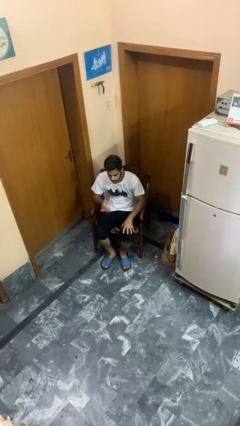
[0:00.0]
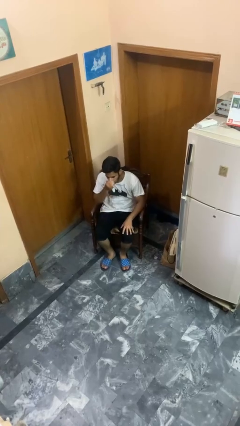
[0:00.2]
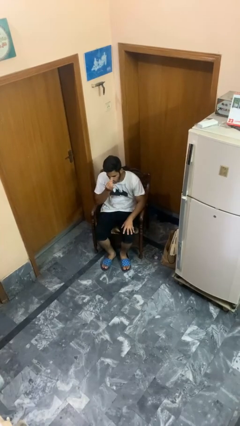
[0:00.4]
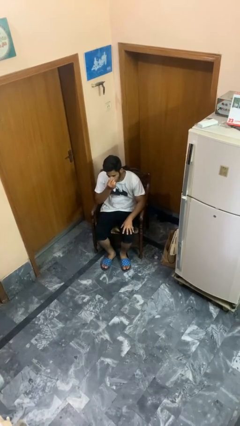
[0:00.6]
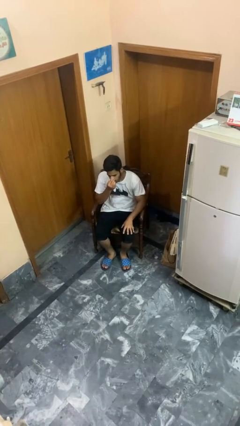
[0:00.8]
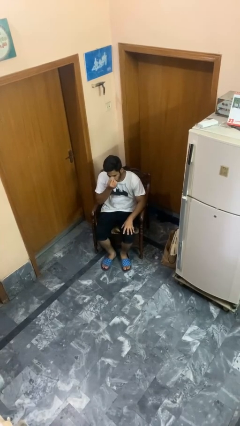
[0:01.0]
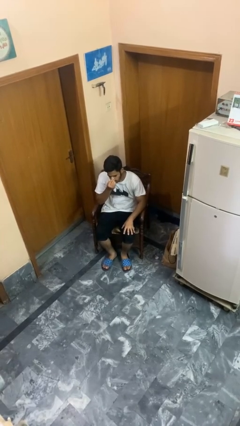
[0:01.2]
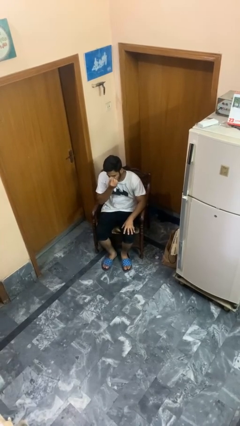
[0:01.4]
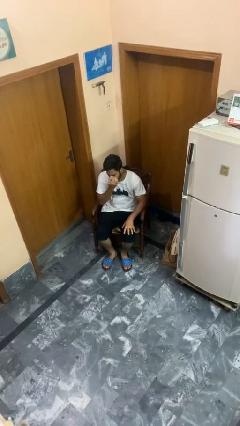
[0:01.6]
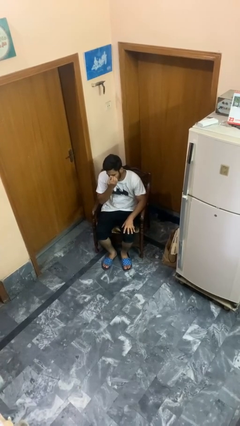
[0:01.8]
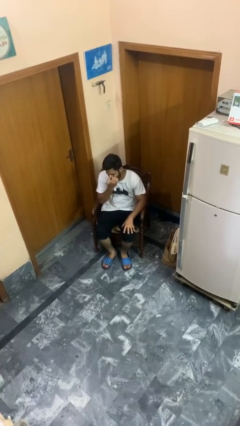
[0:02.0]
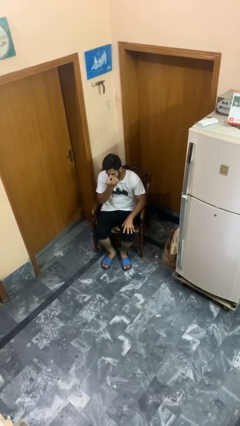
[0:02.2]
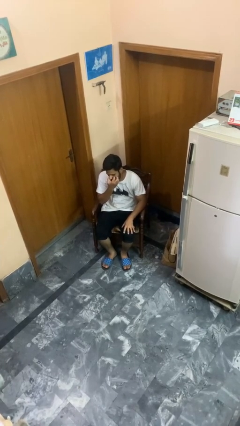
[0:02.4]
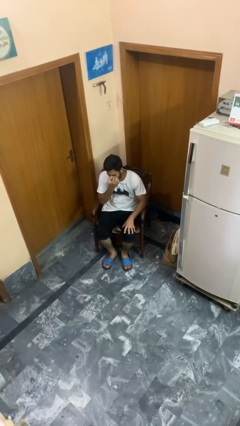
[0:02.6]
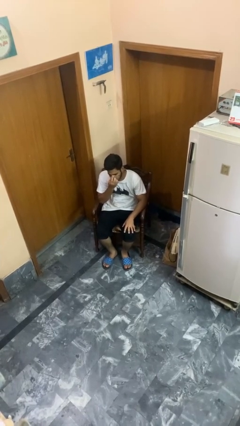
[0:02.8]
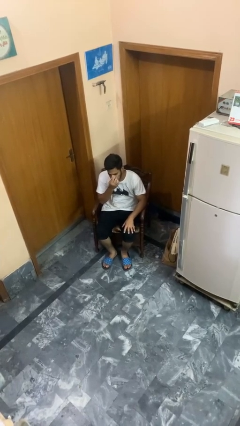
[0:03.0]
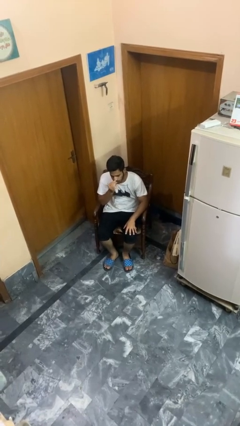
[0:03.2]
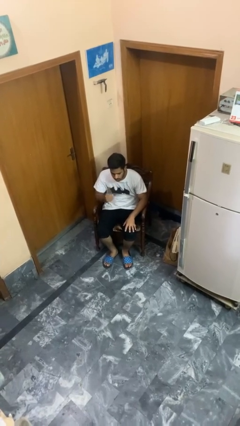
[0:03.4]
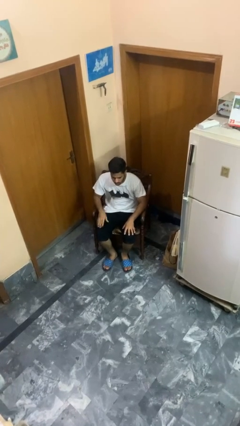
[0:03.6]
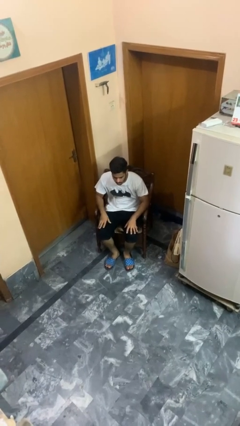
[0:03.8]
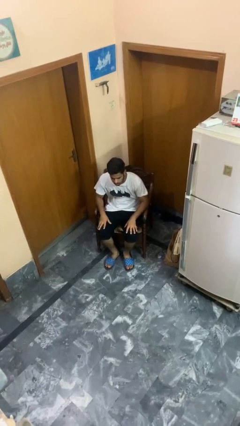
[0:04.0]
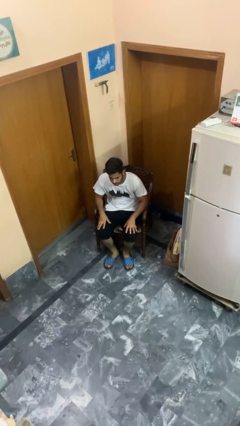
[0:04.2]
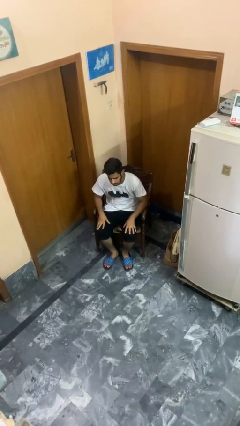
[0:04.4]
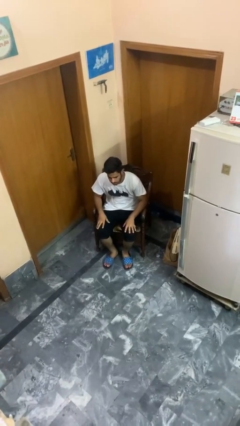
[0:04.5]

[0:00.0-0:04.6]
person scratches face

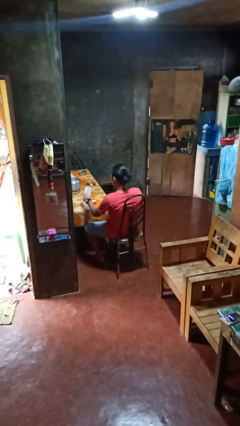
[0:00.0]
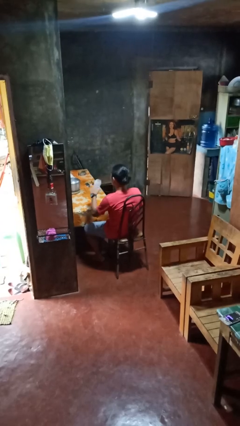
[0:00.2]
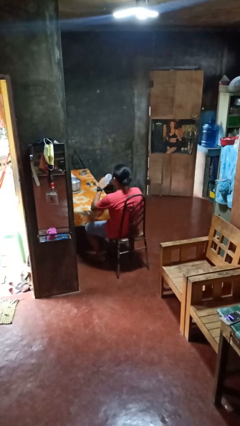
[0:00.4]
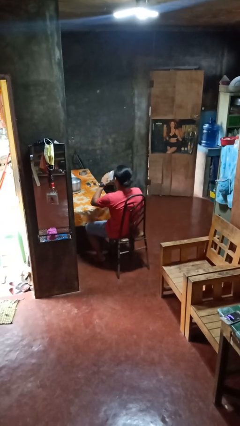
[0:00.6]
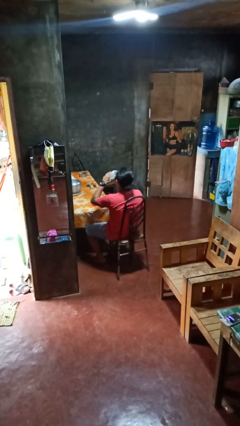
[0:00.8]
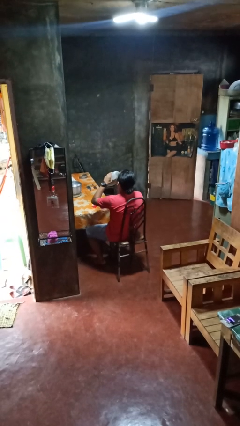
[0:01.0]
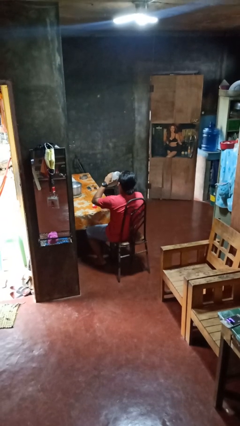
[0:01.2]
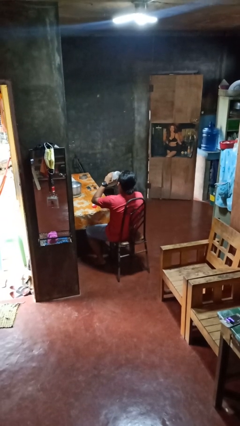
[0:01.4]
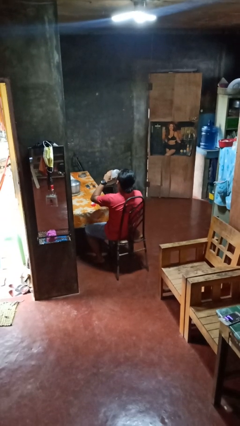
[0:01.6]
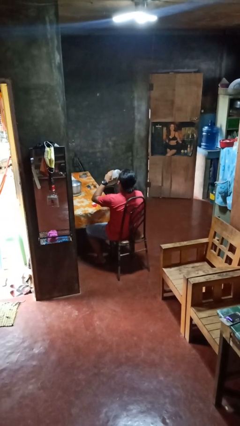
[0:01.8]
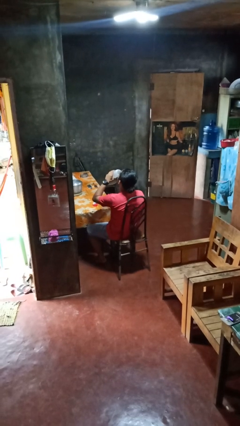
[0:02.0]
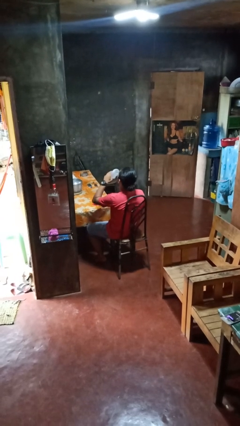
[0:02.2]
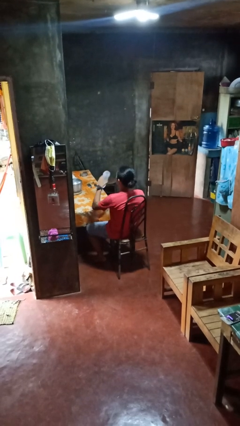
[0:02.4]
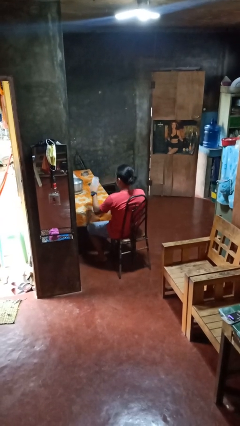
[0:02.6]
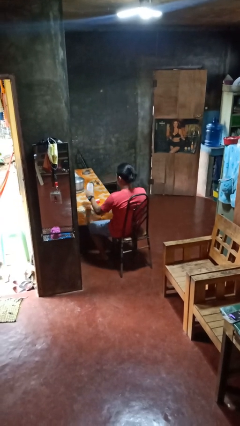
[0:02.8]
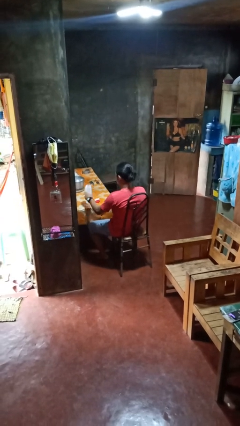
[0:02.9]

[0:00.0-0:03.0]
person drinks from bottle

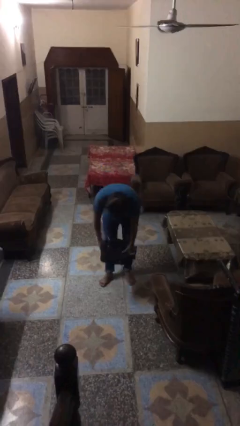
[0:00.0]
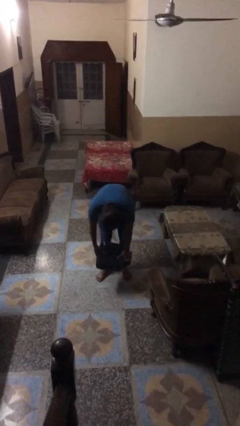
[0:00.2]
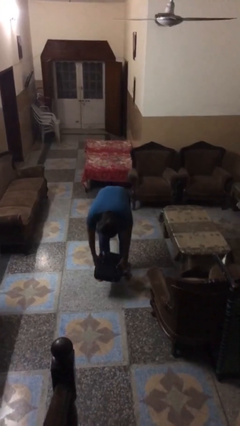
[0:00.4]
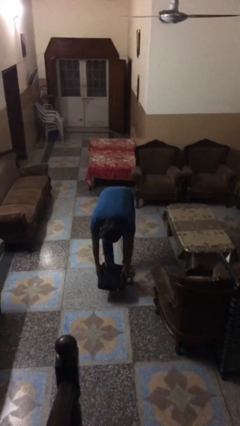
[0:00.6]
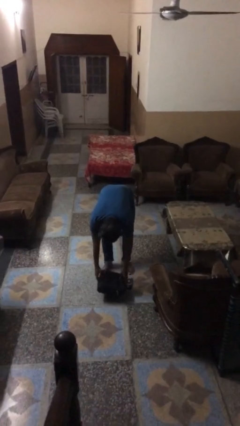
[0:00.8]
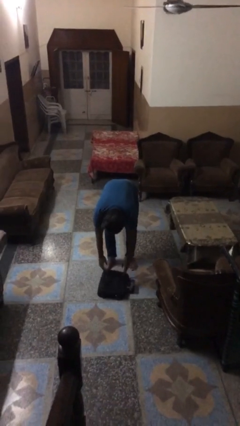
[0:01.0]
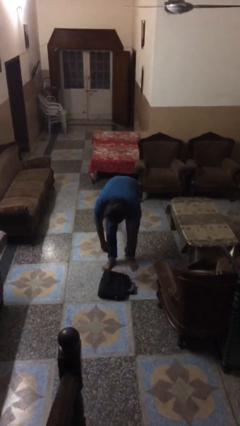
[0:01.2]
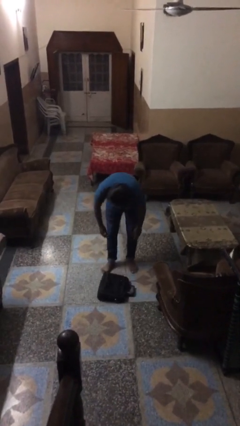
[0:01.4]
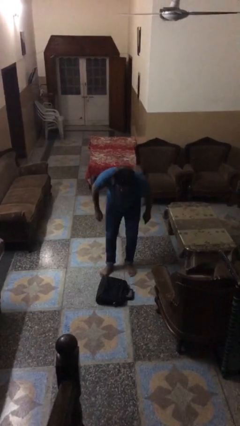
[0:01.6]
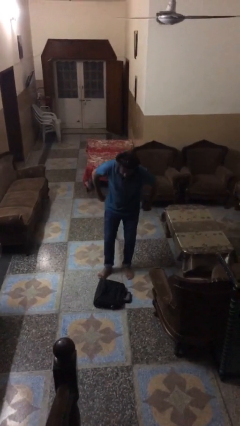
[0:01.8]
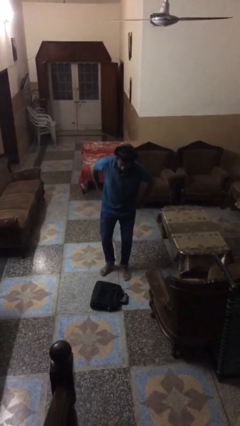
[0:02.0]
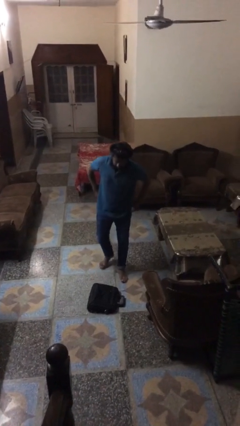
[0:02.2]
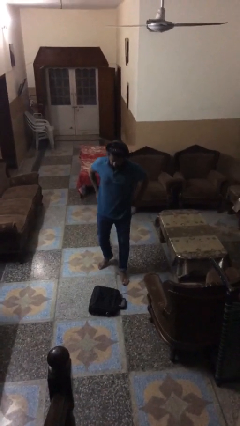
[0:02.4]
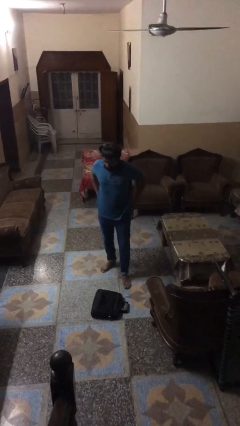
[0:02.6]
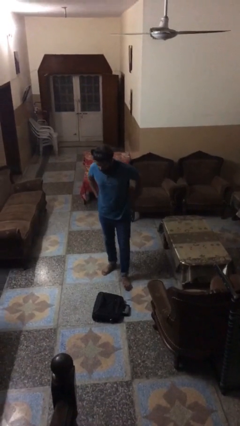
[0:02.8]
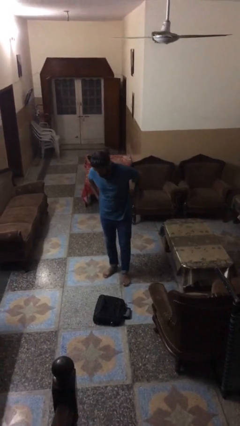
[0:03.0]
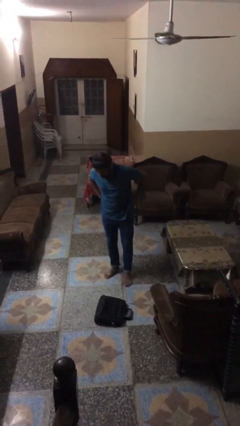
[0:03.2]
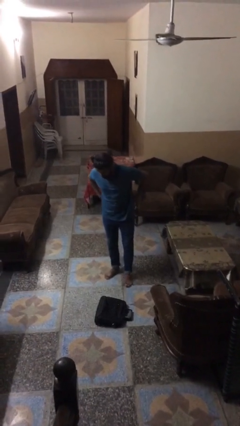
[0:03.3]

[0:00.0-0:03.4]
person puts down object on floor

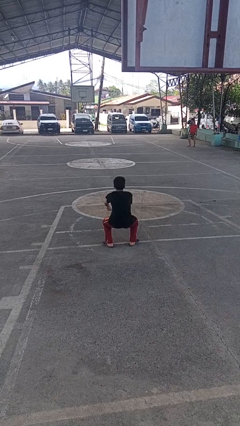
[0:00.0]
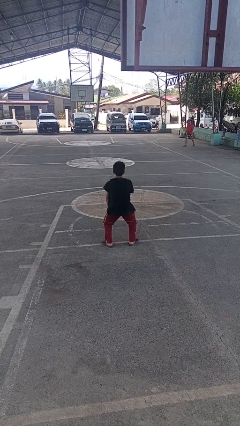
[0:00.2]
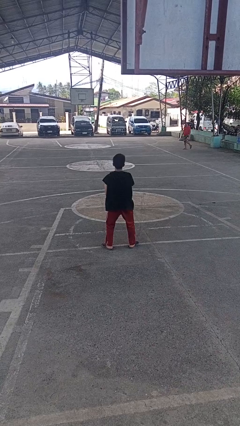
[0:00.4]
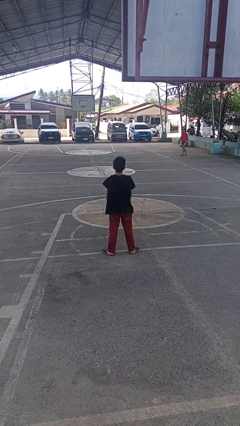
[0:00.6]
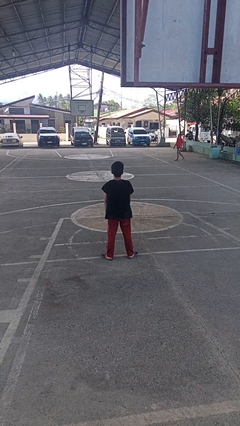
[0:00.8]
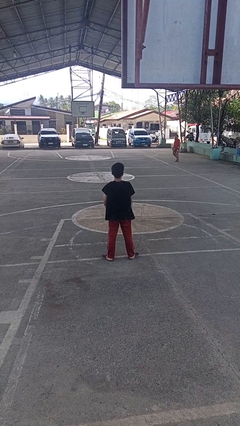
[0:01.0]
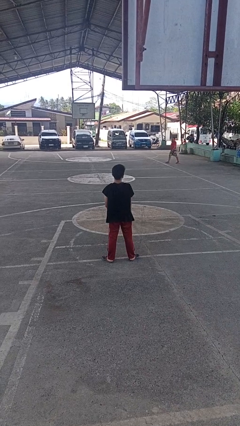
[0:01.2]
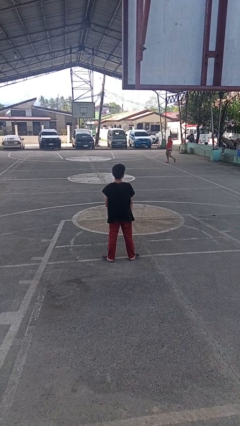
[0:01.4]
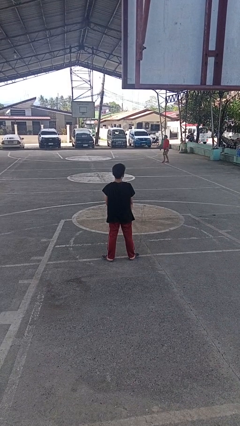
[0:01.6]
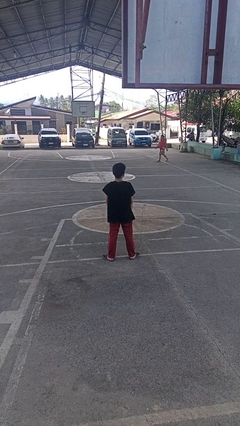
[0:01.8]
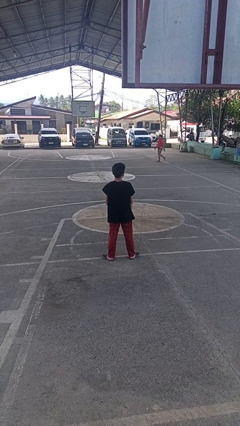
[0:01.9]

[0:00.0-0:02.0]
person stands up

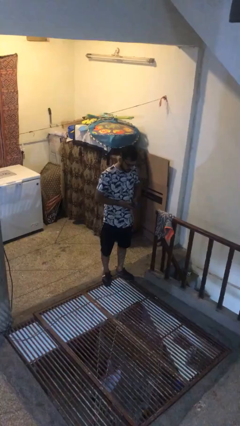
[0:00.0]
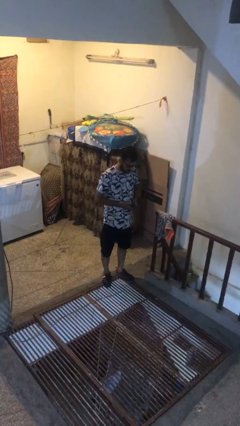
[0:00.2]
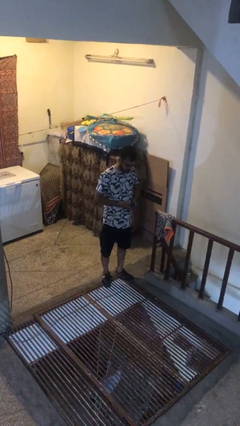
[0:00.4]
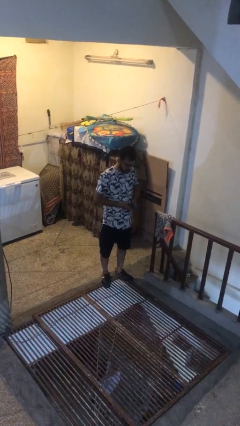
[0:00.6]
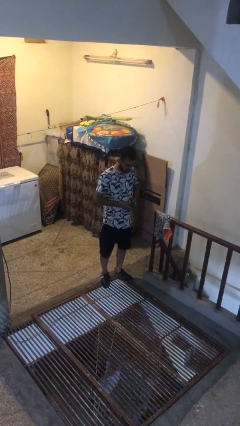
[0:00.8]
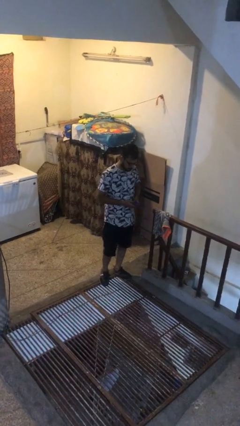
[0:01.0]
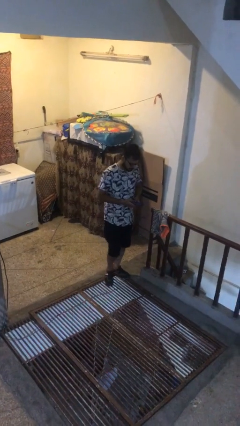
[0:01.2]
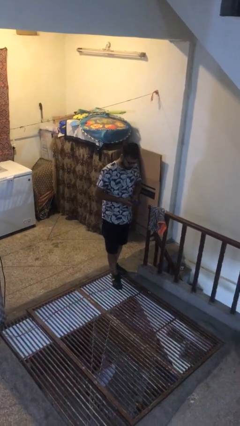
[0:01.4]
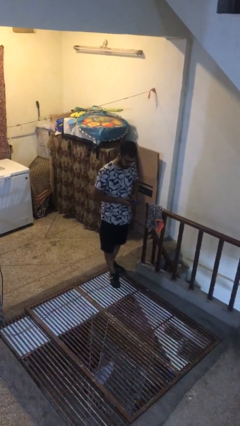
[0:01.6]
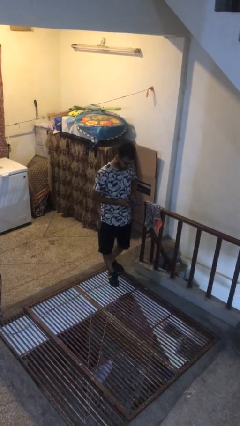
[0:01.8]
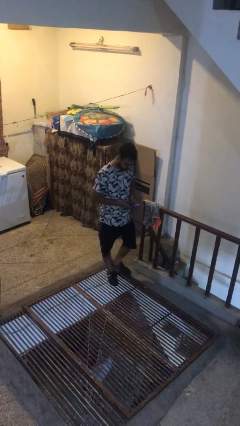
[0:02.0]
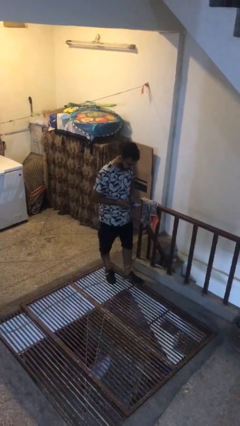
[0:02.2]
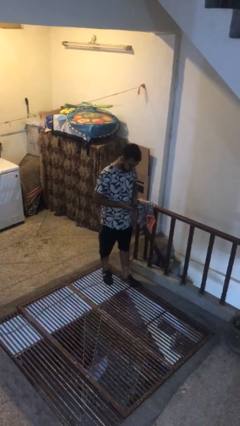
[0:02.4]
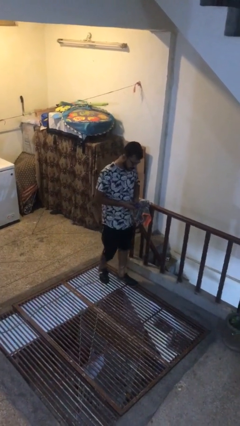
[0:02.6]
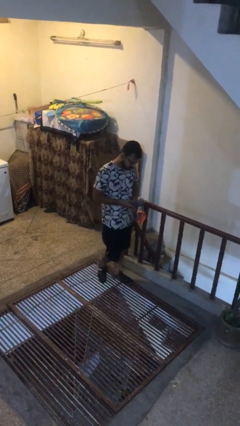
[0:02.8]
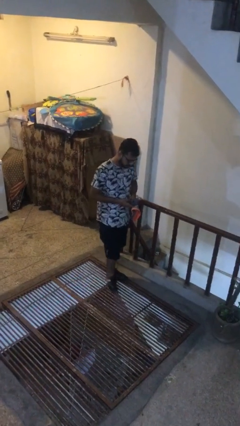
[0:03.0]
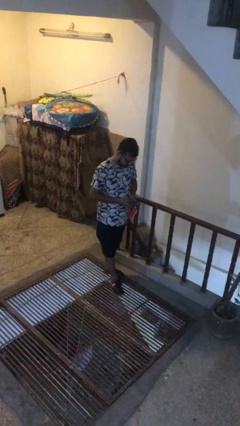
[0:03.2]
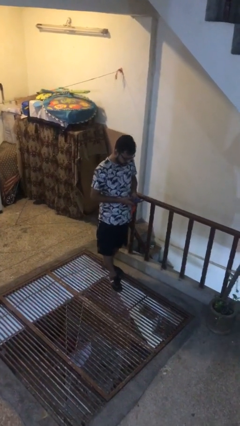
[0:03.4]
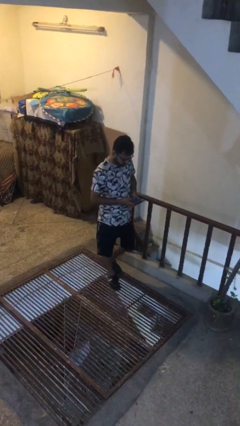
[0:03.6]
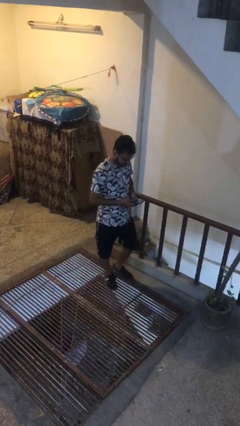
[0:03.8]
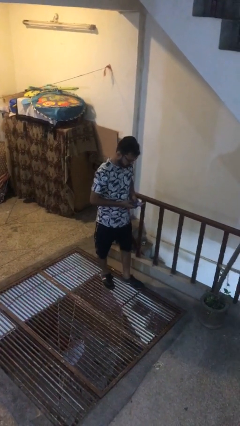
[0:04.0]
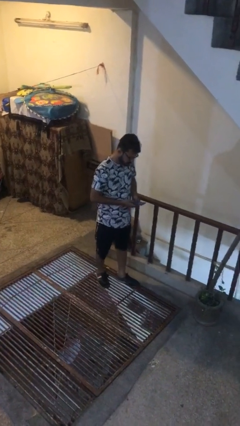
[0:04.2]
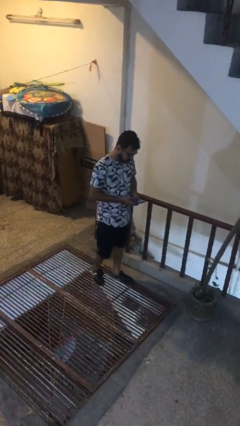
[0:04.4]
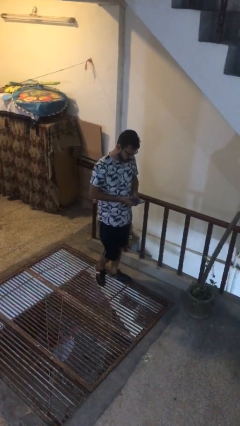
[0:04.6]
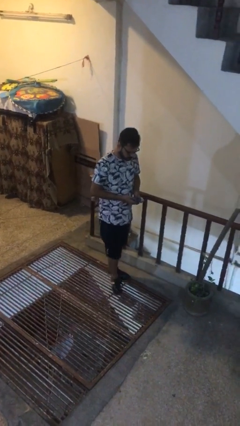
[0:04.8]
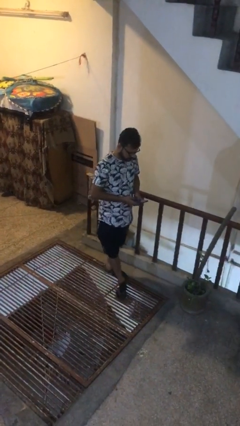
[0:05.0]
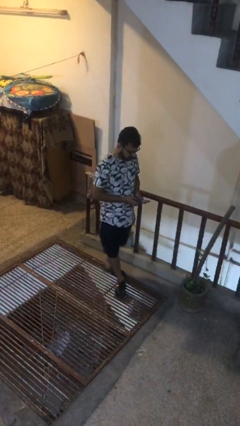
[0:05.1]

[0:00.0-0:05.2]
person texts on phone
